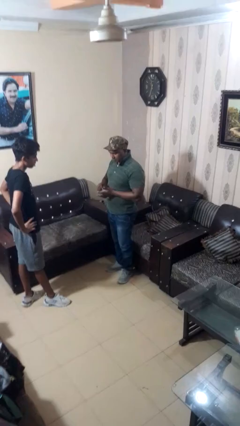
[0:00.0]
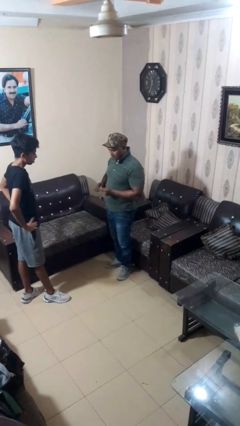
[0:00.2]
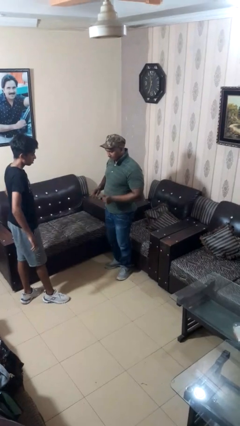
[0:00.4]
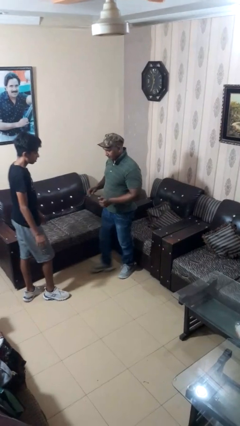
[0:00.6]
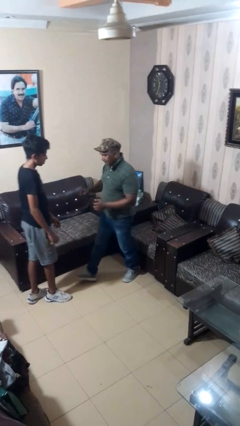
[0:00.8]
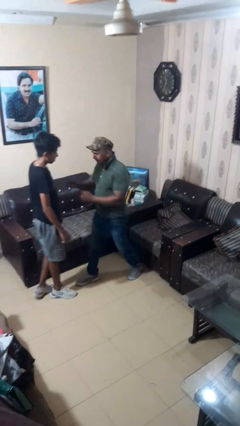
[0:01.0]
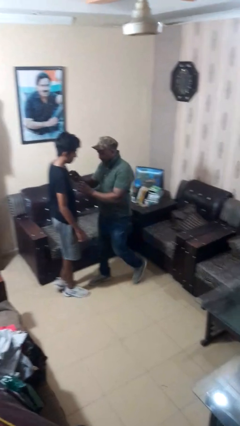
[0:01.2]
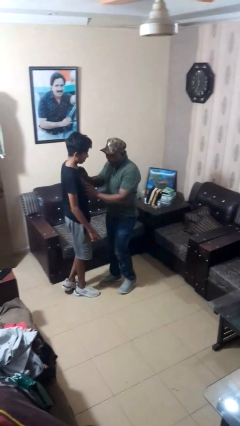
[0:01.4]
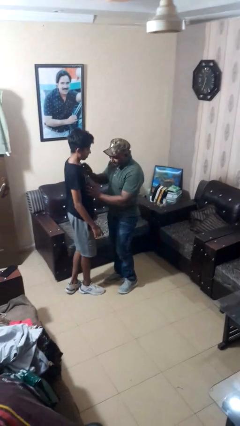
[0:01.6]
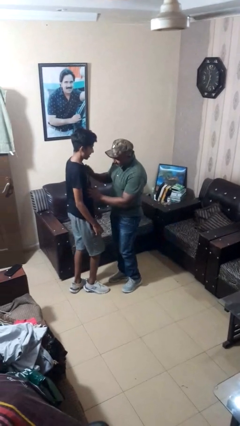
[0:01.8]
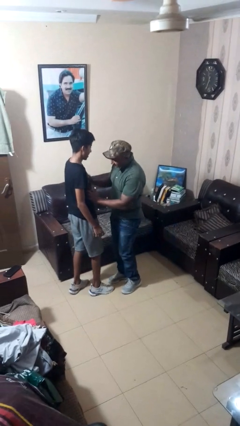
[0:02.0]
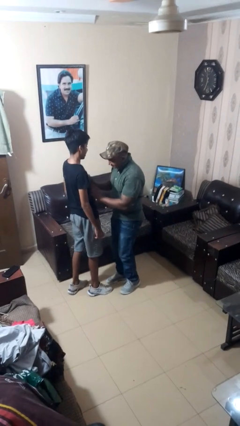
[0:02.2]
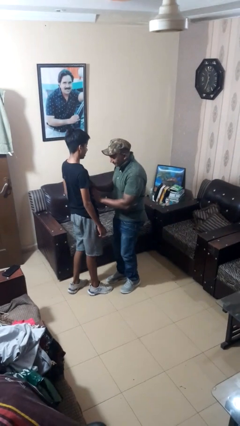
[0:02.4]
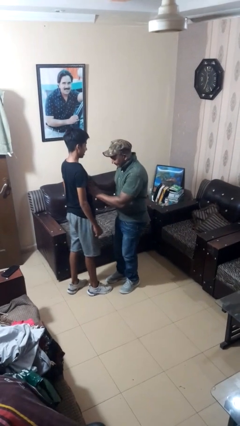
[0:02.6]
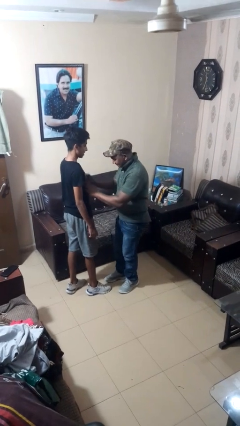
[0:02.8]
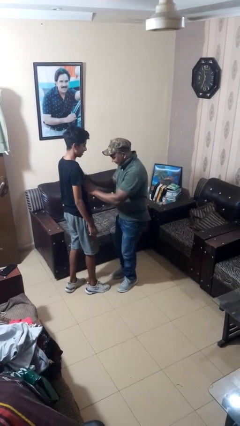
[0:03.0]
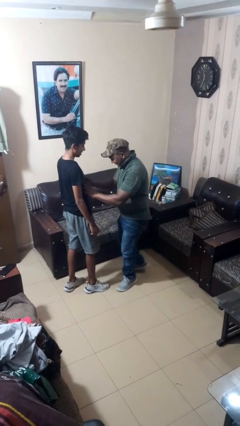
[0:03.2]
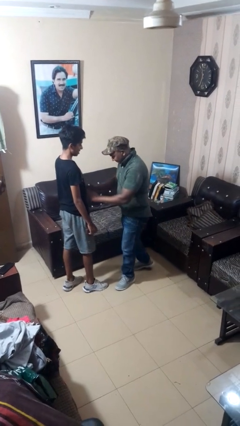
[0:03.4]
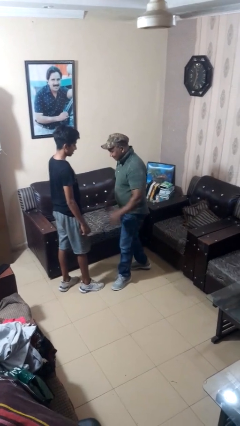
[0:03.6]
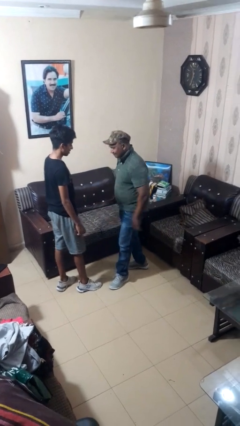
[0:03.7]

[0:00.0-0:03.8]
person tickles person

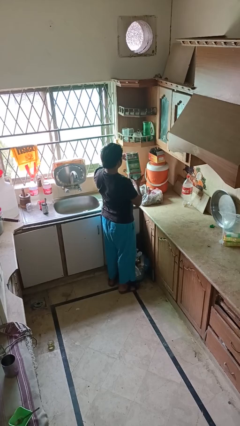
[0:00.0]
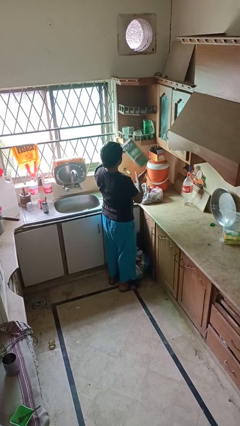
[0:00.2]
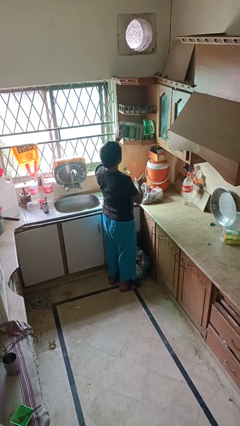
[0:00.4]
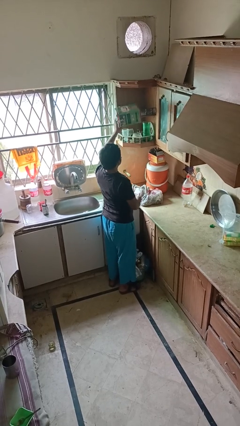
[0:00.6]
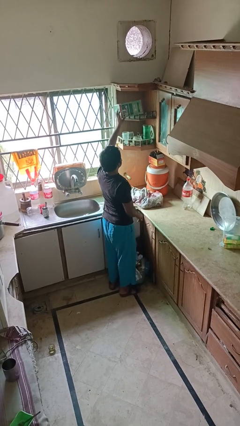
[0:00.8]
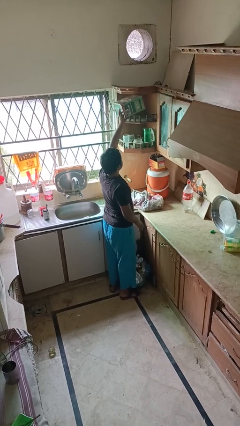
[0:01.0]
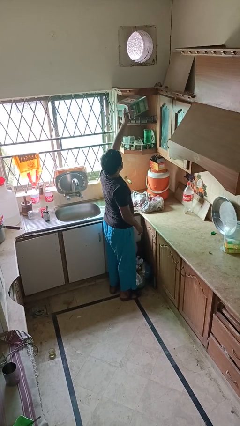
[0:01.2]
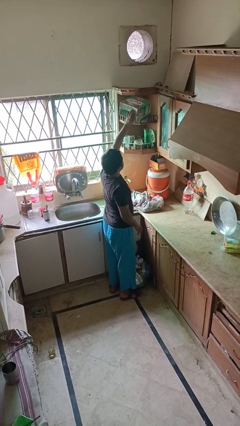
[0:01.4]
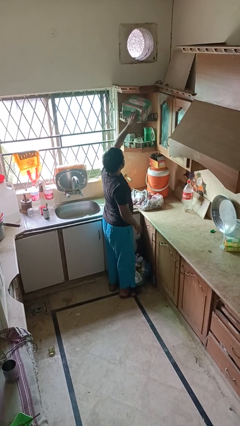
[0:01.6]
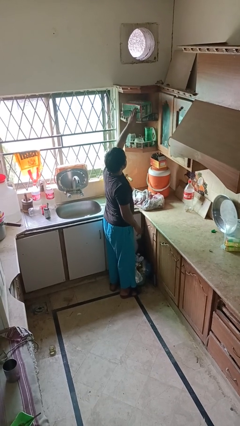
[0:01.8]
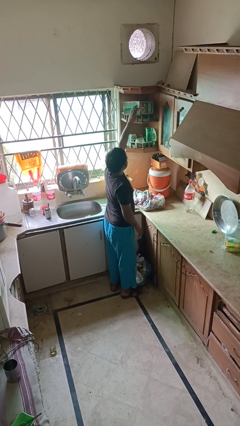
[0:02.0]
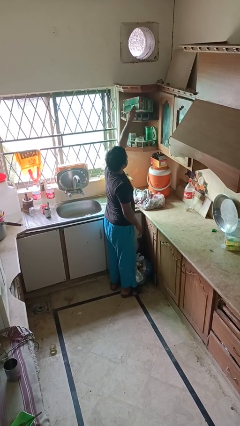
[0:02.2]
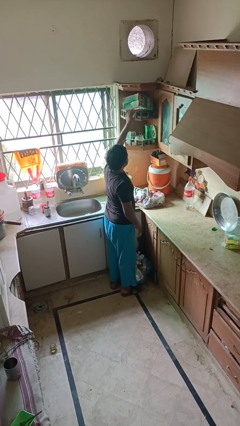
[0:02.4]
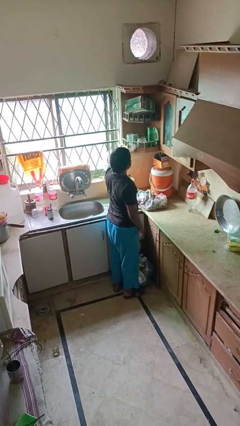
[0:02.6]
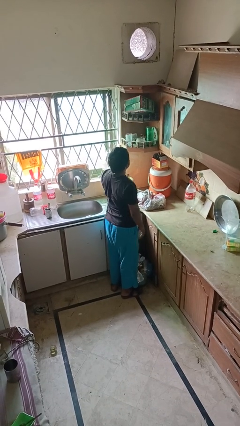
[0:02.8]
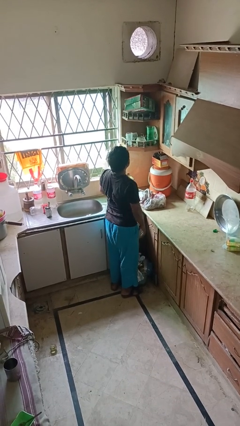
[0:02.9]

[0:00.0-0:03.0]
person puts down object on shelf

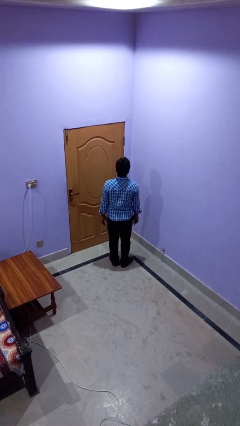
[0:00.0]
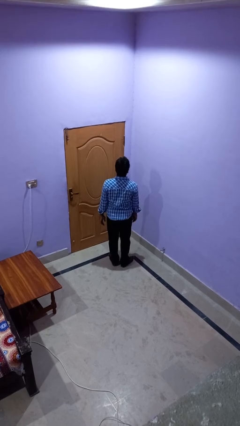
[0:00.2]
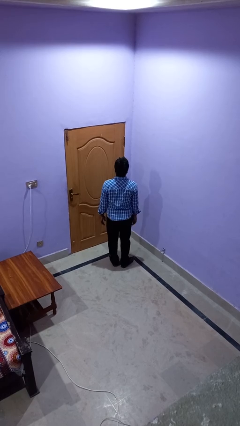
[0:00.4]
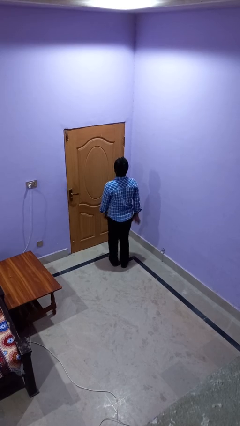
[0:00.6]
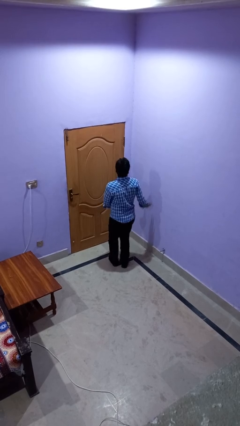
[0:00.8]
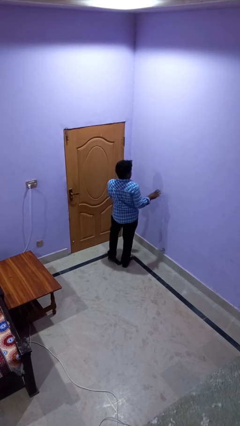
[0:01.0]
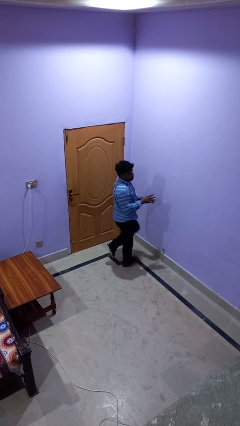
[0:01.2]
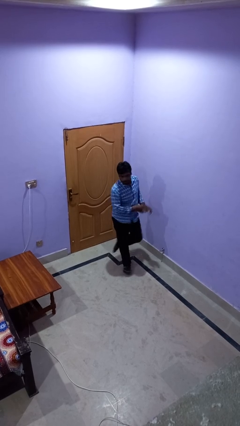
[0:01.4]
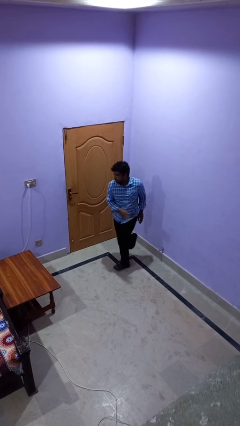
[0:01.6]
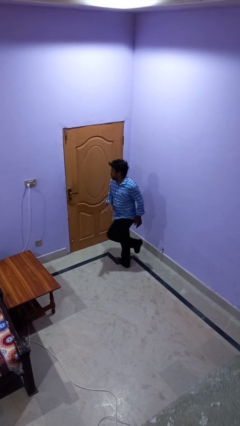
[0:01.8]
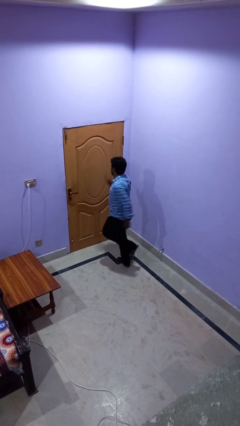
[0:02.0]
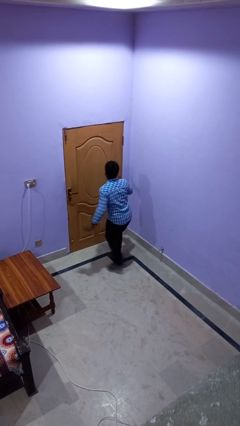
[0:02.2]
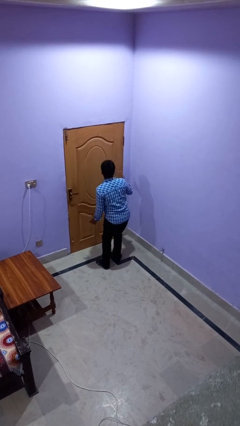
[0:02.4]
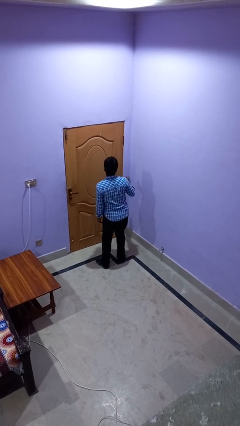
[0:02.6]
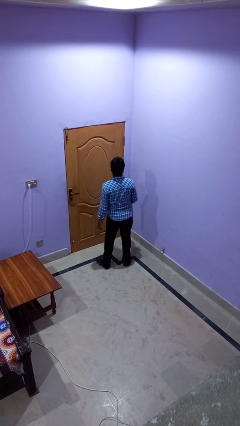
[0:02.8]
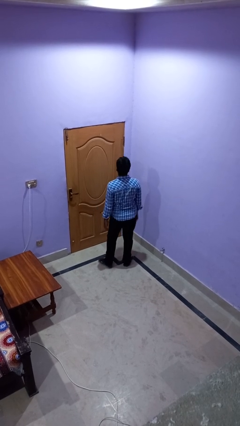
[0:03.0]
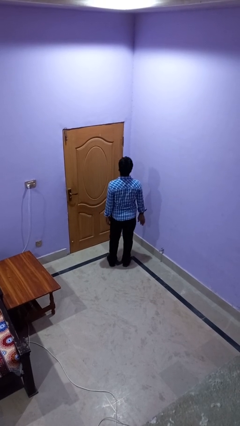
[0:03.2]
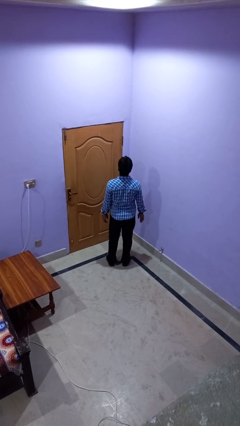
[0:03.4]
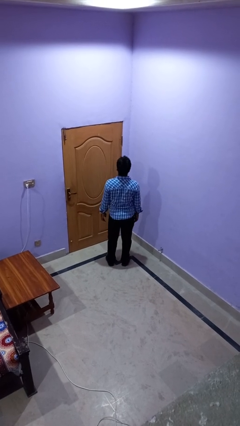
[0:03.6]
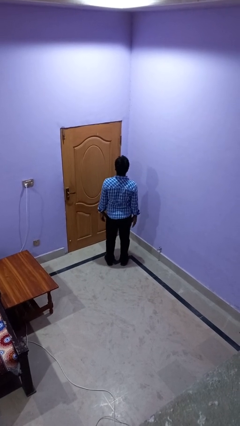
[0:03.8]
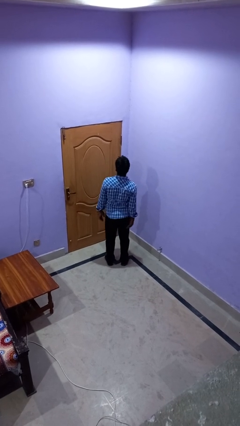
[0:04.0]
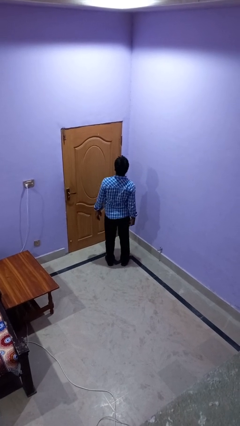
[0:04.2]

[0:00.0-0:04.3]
person twirls

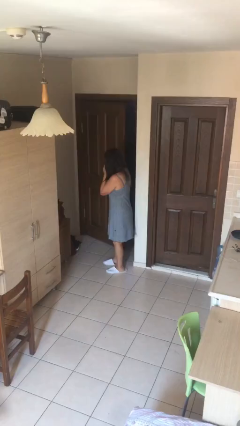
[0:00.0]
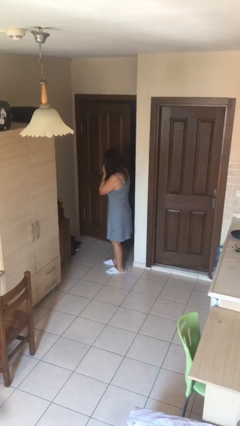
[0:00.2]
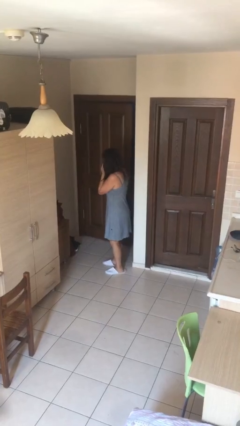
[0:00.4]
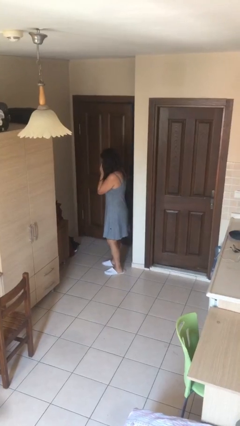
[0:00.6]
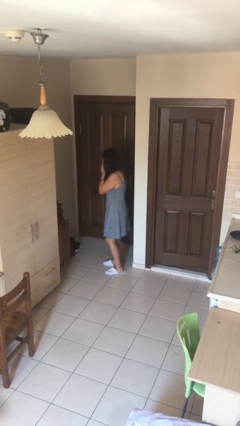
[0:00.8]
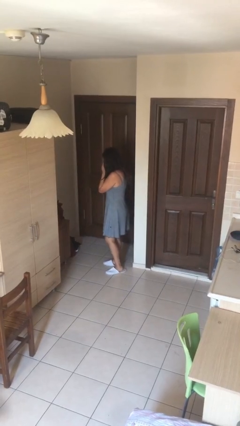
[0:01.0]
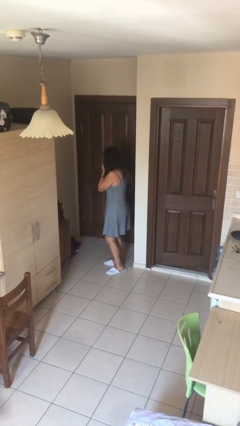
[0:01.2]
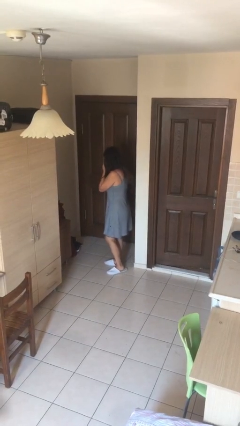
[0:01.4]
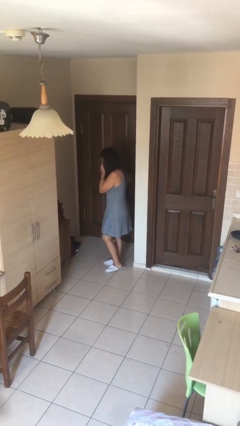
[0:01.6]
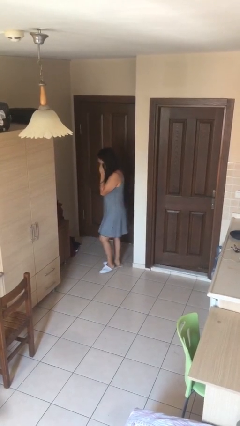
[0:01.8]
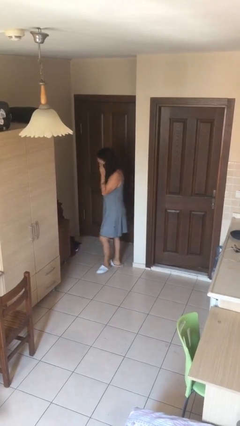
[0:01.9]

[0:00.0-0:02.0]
person closes facility door

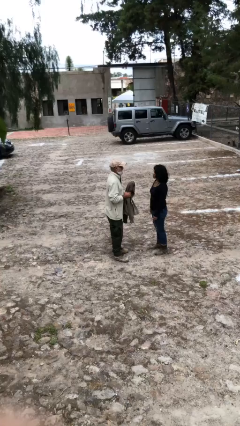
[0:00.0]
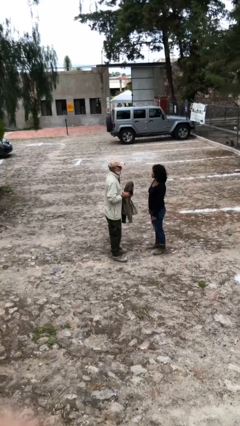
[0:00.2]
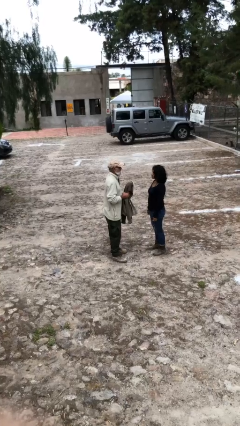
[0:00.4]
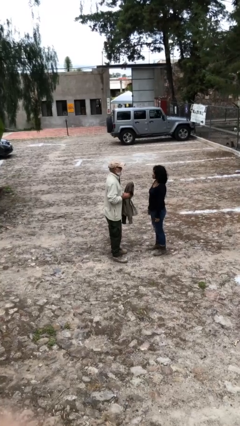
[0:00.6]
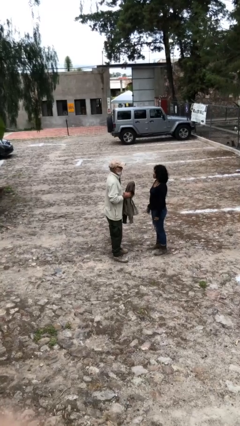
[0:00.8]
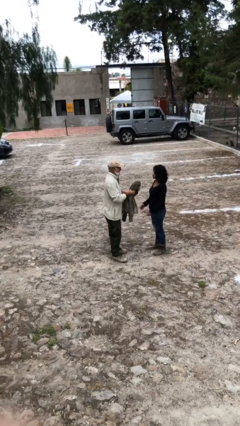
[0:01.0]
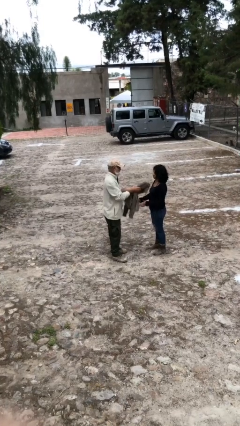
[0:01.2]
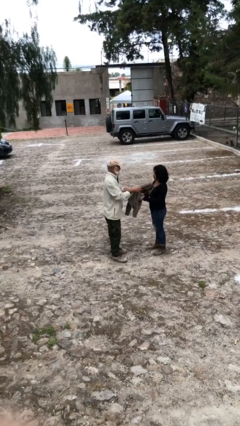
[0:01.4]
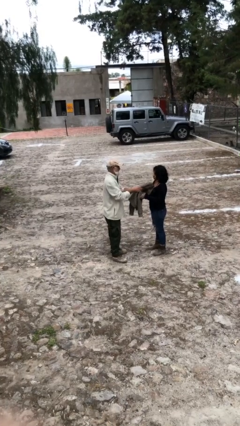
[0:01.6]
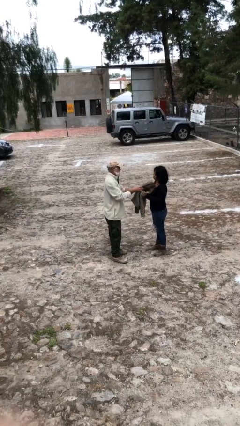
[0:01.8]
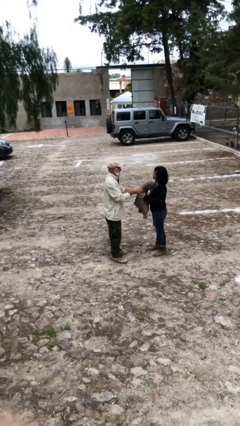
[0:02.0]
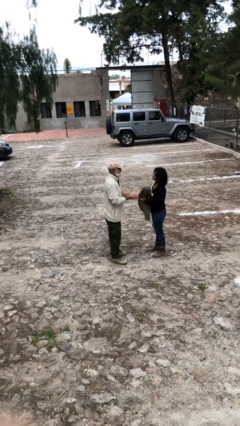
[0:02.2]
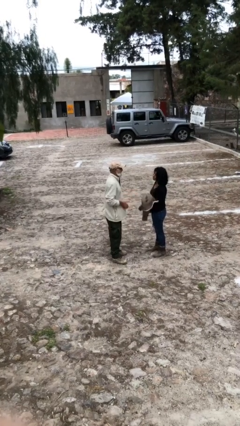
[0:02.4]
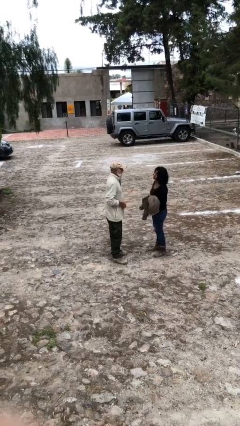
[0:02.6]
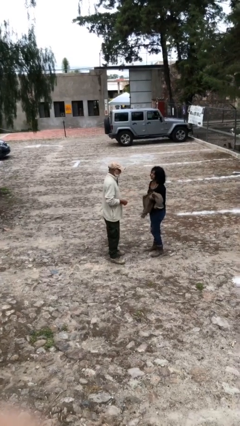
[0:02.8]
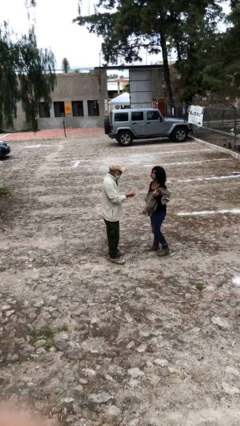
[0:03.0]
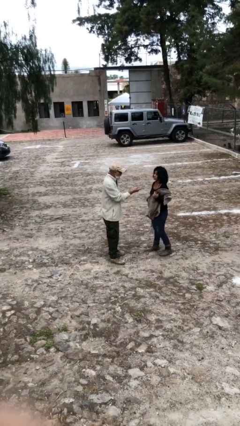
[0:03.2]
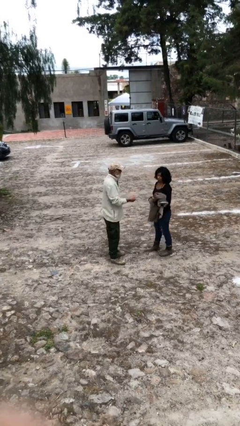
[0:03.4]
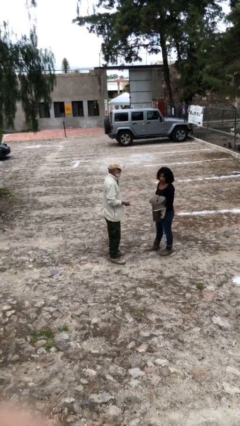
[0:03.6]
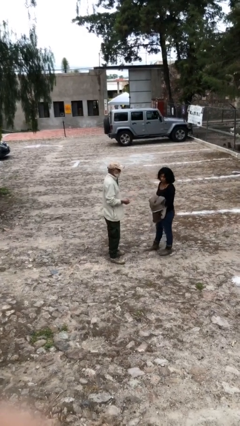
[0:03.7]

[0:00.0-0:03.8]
person transfers object to person

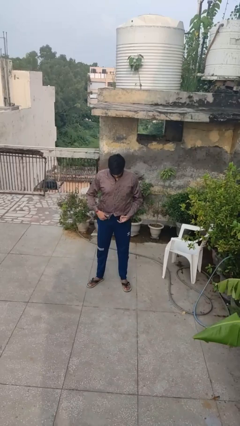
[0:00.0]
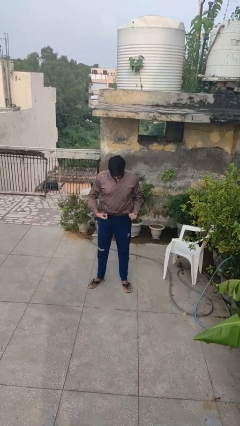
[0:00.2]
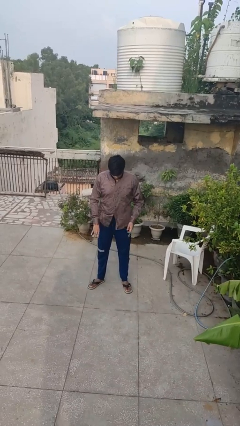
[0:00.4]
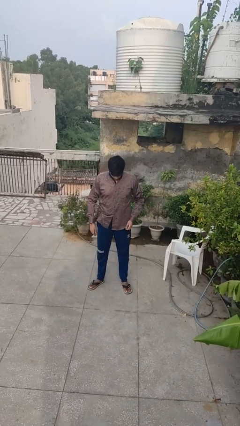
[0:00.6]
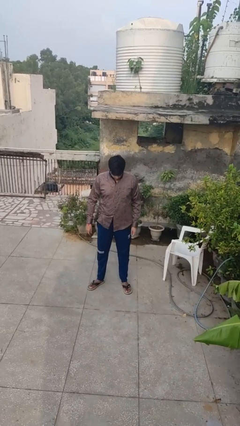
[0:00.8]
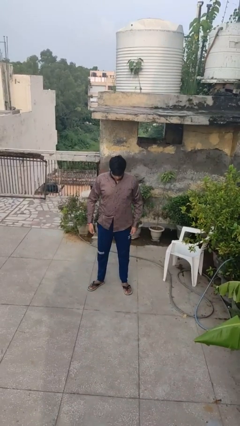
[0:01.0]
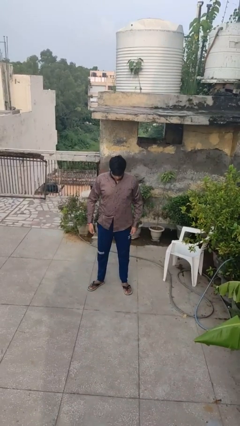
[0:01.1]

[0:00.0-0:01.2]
person untucks shirt
